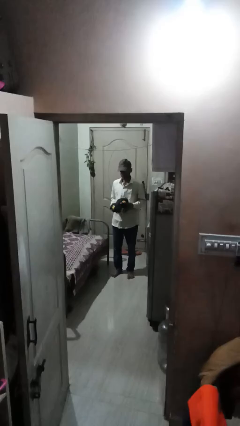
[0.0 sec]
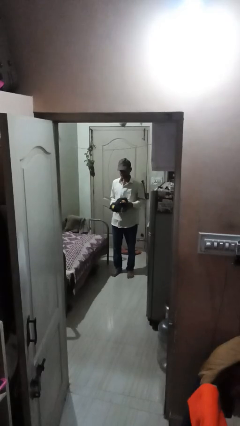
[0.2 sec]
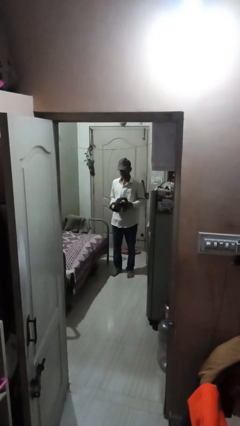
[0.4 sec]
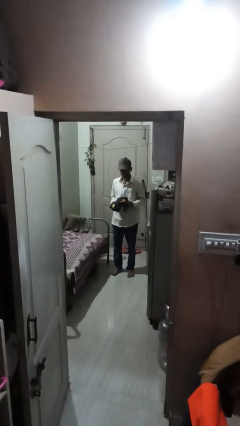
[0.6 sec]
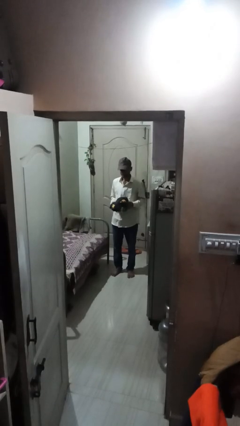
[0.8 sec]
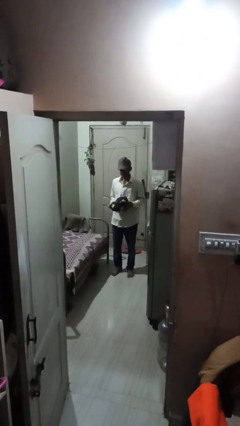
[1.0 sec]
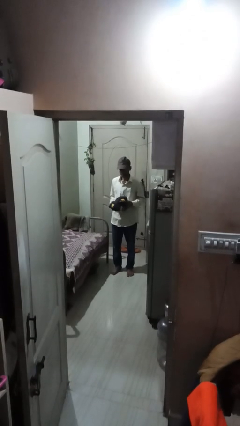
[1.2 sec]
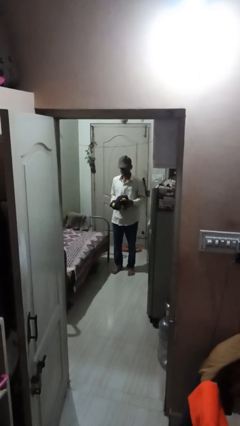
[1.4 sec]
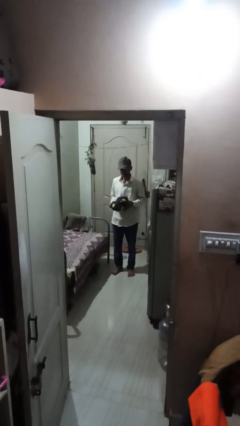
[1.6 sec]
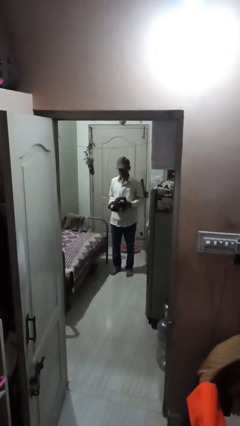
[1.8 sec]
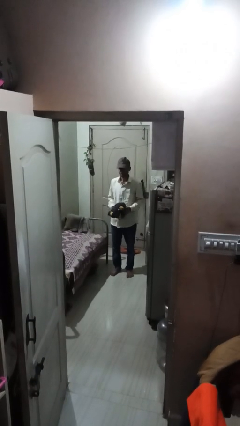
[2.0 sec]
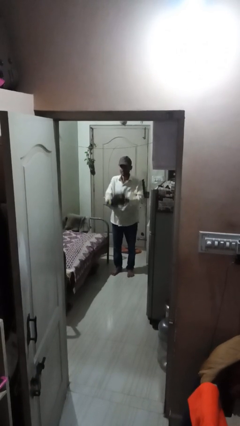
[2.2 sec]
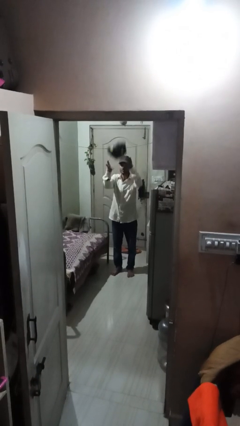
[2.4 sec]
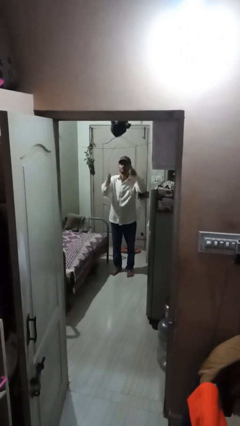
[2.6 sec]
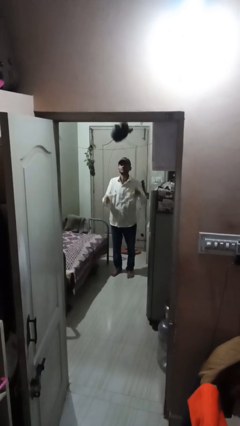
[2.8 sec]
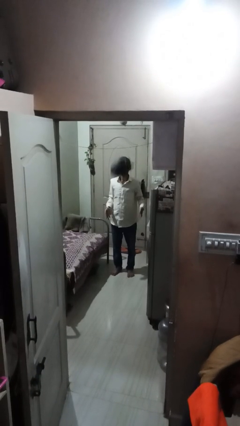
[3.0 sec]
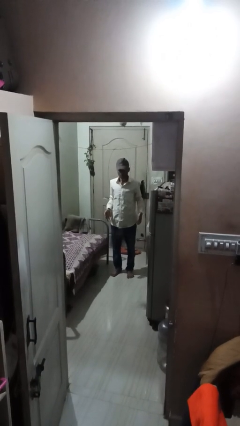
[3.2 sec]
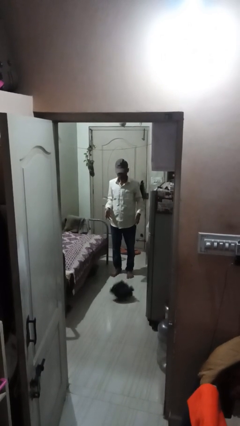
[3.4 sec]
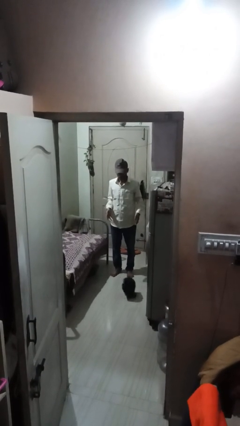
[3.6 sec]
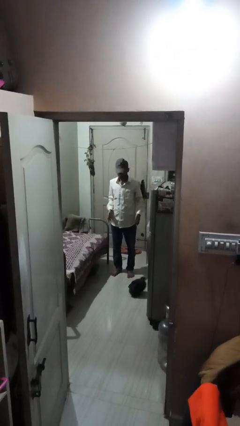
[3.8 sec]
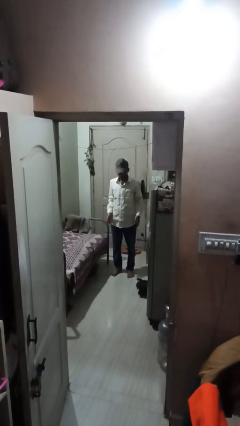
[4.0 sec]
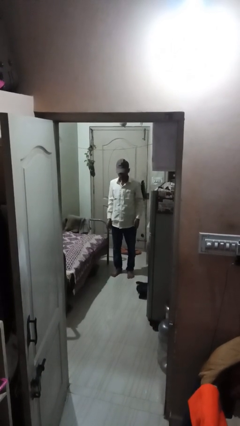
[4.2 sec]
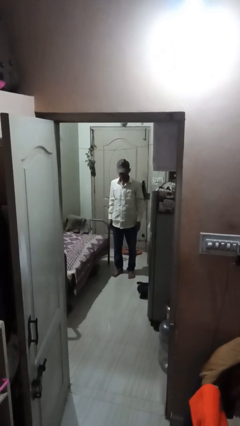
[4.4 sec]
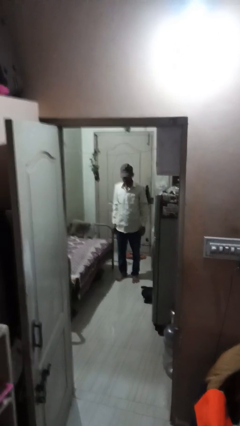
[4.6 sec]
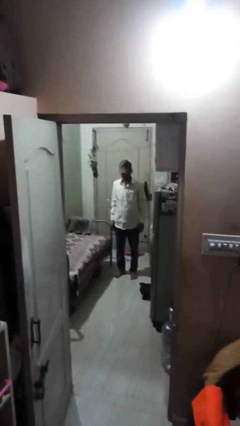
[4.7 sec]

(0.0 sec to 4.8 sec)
person throws object into air

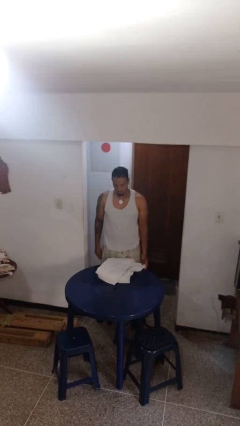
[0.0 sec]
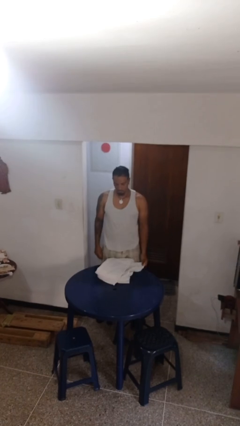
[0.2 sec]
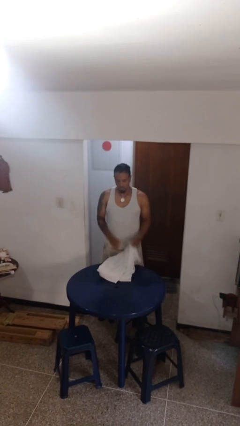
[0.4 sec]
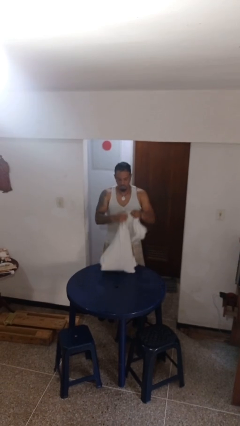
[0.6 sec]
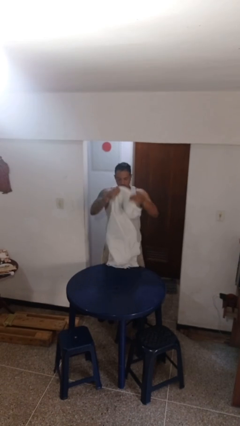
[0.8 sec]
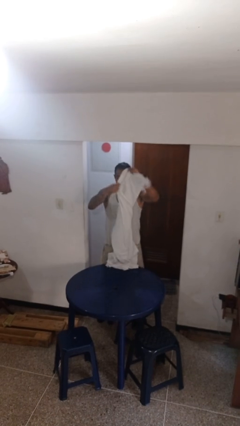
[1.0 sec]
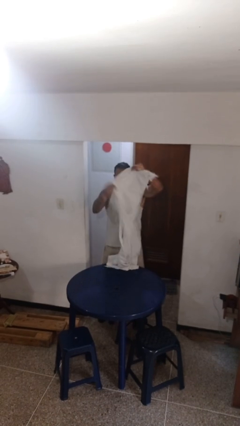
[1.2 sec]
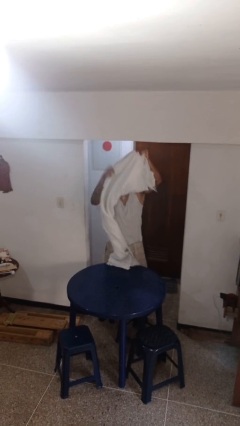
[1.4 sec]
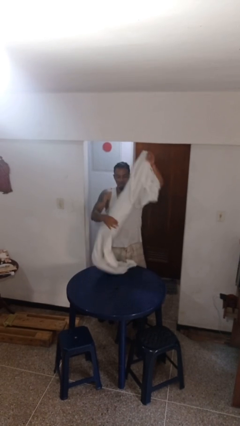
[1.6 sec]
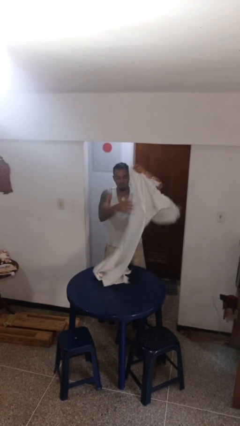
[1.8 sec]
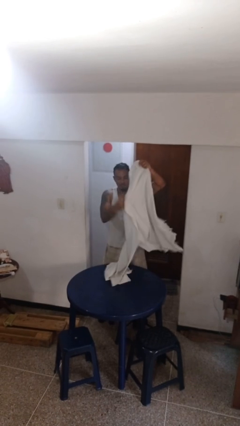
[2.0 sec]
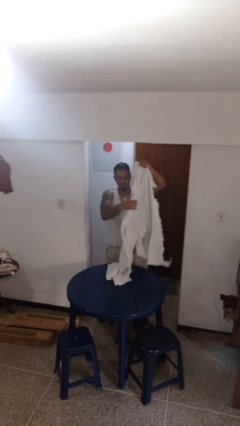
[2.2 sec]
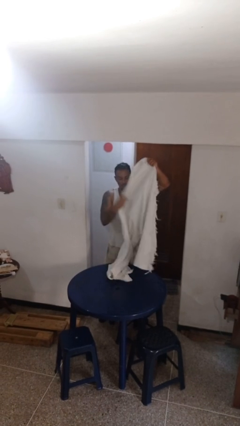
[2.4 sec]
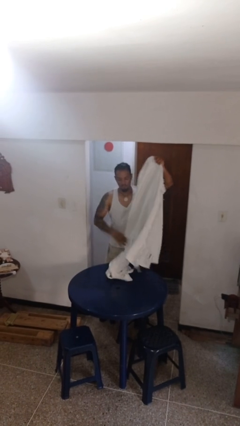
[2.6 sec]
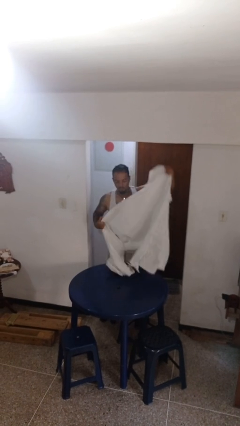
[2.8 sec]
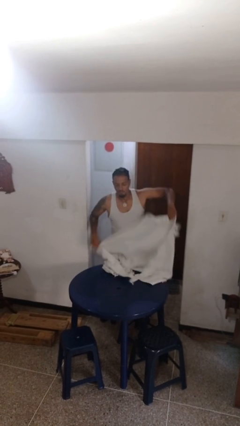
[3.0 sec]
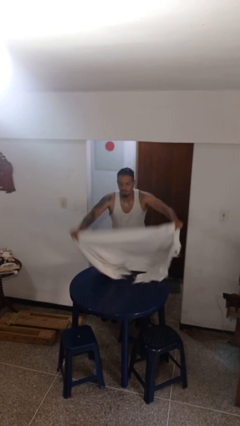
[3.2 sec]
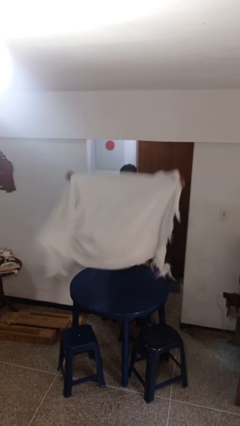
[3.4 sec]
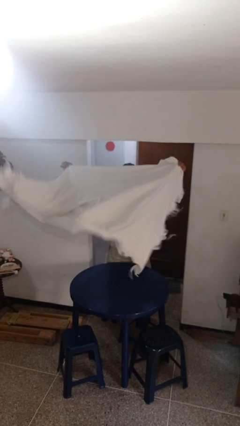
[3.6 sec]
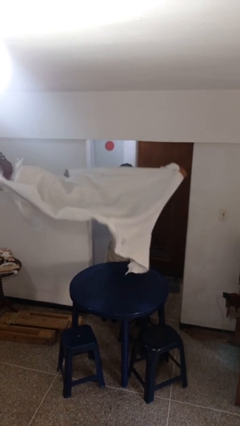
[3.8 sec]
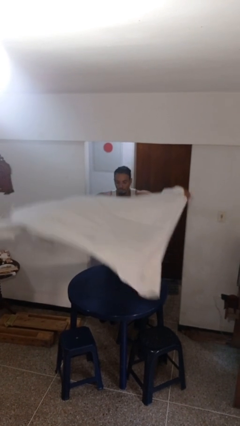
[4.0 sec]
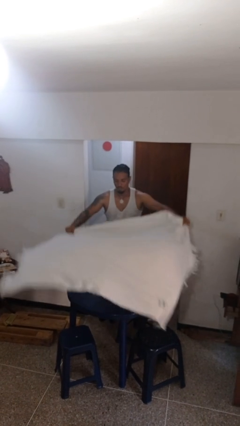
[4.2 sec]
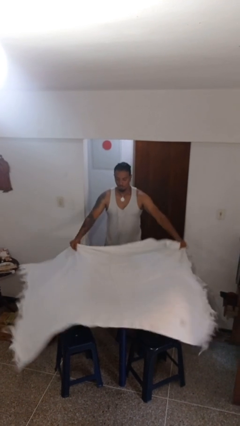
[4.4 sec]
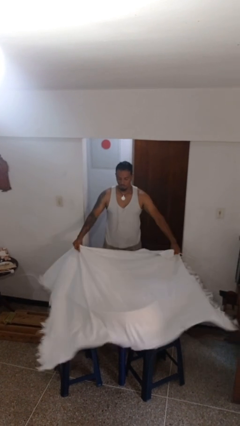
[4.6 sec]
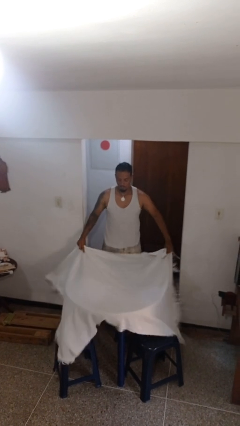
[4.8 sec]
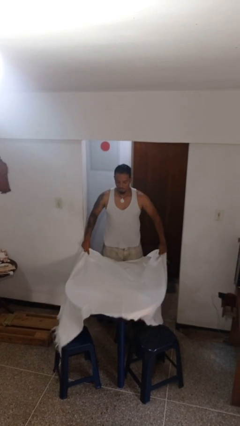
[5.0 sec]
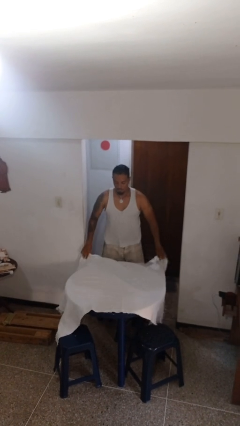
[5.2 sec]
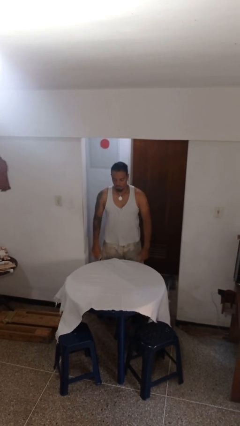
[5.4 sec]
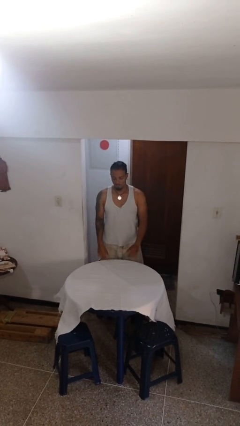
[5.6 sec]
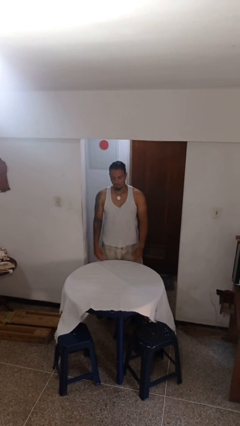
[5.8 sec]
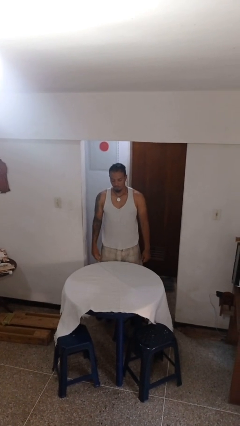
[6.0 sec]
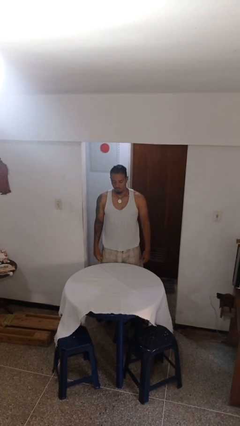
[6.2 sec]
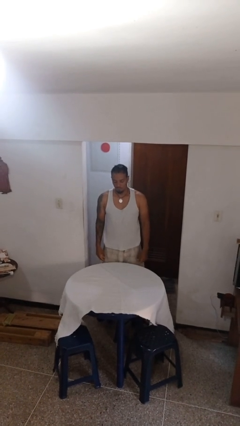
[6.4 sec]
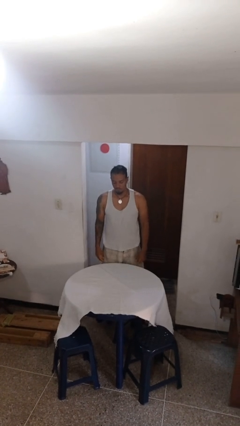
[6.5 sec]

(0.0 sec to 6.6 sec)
person spreads tablecloth

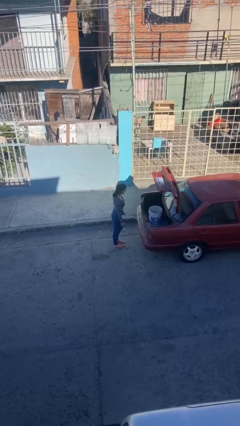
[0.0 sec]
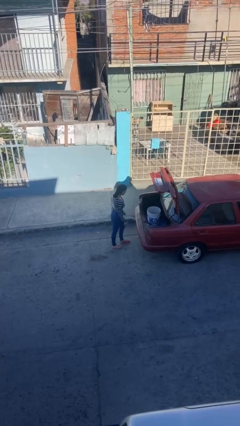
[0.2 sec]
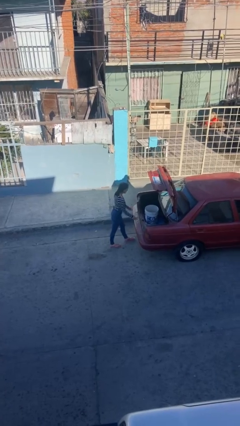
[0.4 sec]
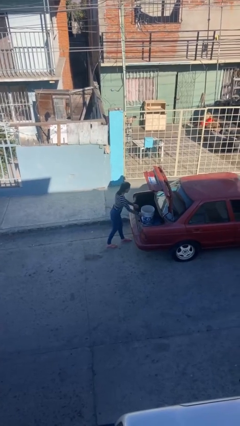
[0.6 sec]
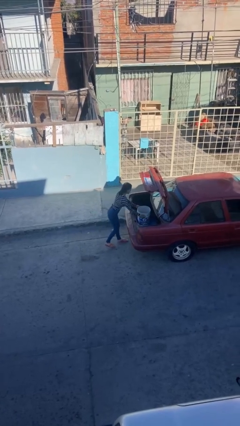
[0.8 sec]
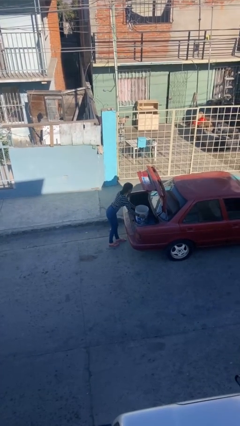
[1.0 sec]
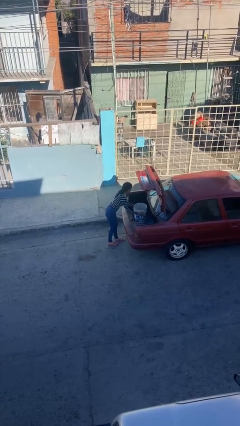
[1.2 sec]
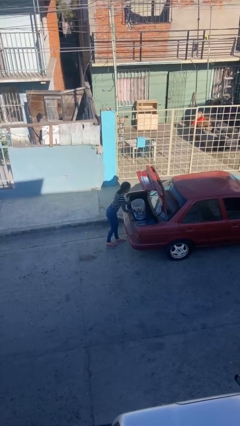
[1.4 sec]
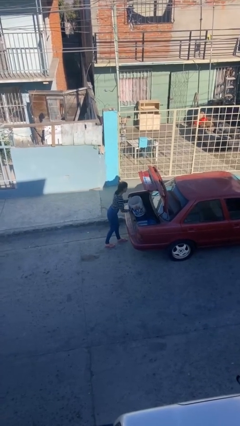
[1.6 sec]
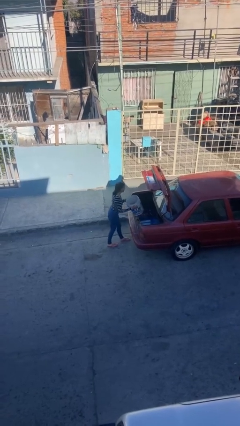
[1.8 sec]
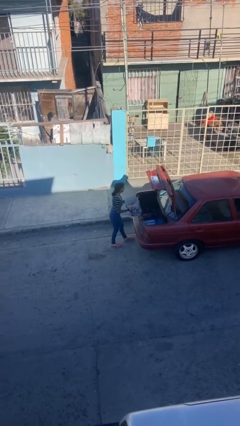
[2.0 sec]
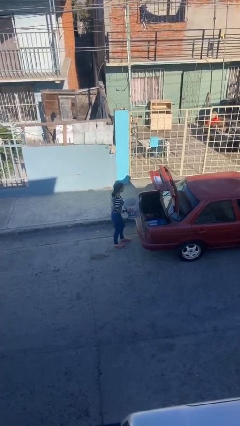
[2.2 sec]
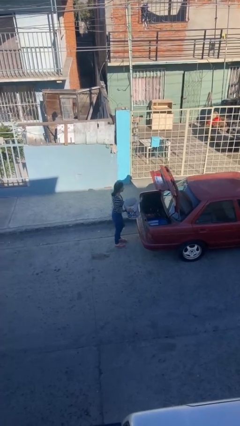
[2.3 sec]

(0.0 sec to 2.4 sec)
person unloads car

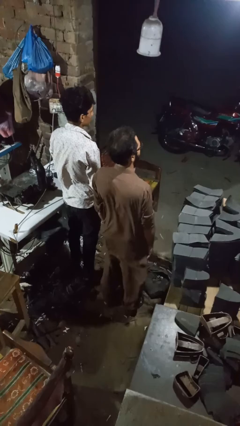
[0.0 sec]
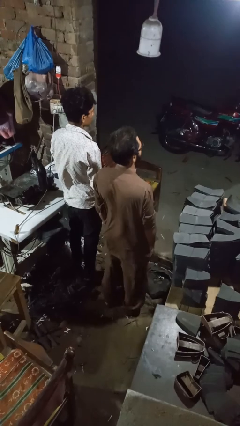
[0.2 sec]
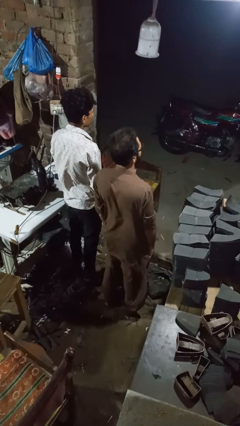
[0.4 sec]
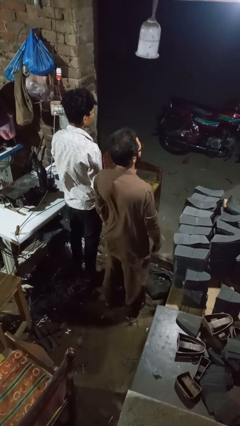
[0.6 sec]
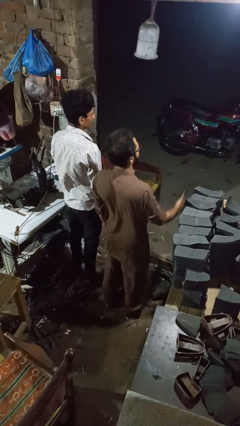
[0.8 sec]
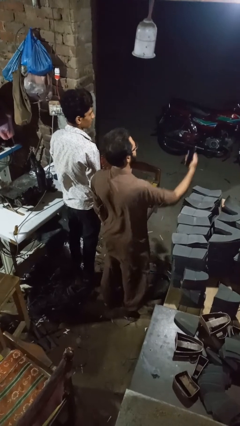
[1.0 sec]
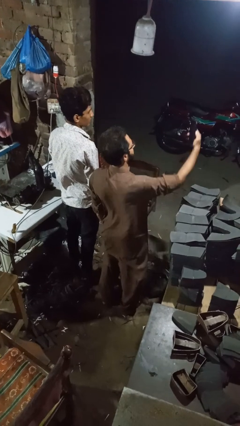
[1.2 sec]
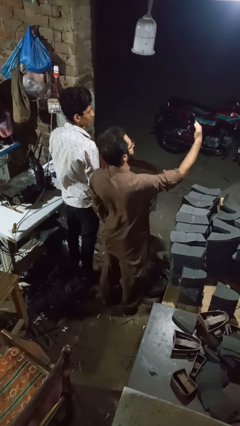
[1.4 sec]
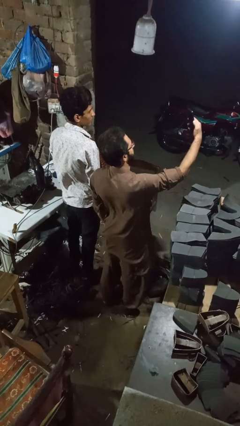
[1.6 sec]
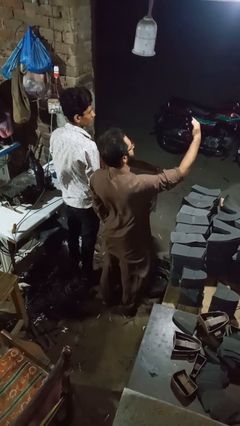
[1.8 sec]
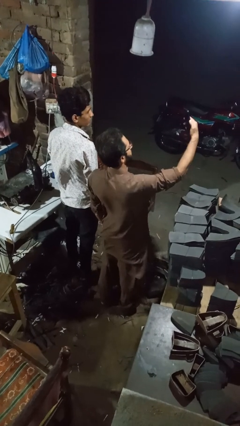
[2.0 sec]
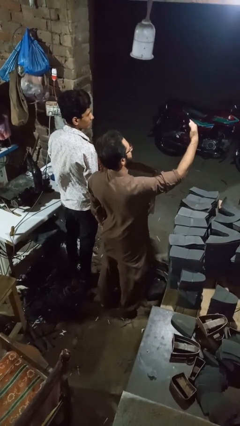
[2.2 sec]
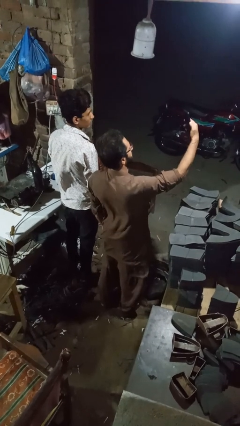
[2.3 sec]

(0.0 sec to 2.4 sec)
person takes selfie with person

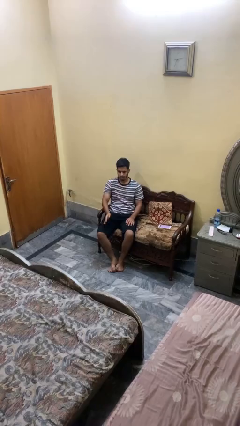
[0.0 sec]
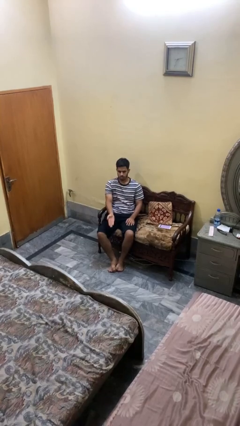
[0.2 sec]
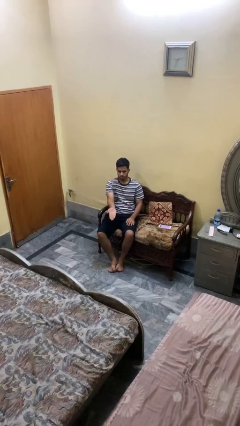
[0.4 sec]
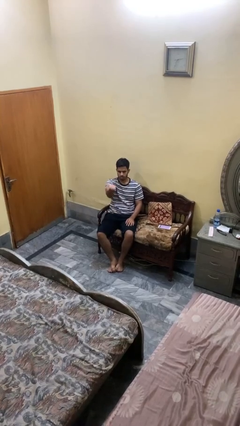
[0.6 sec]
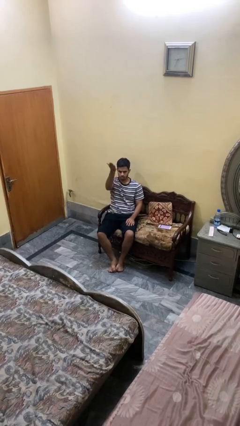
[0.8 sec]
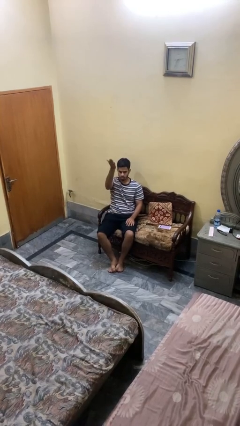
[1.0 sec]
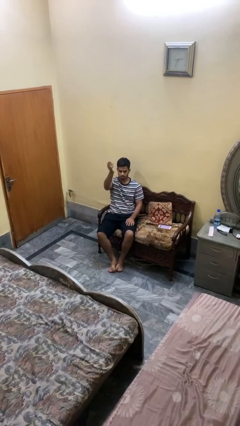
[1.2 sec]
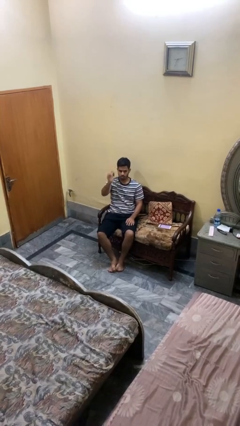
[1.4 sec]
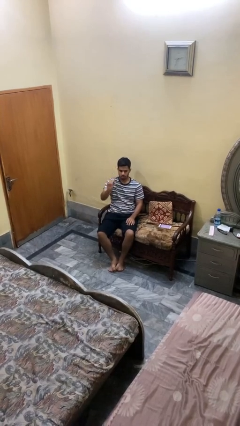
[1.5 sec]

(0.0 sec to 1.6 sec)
person gestures swipe up
